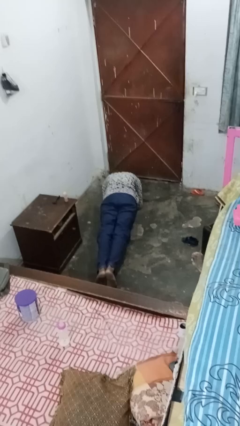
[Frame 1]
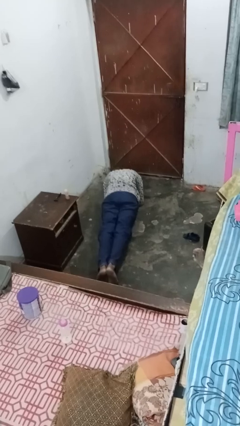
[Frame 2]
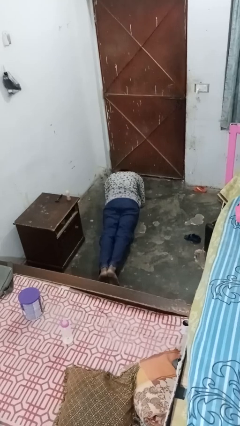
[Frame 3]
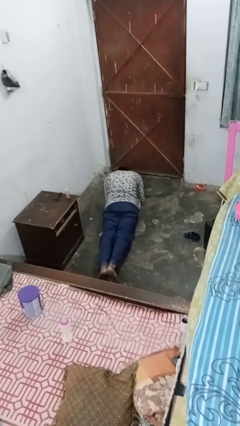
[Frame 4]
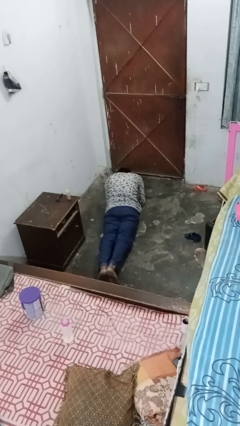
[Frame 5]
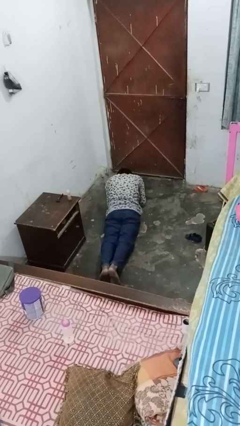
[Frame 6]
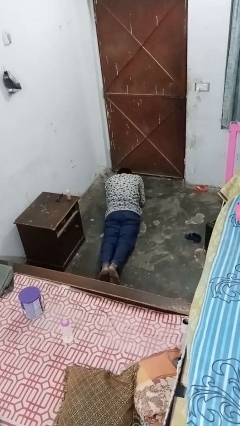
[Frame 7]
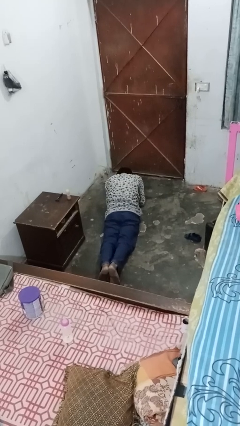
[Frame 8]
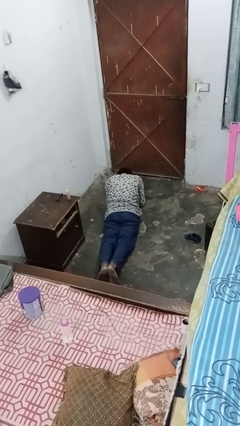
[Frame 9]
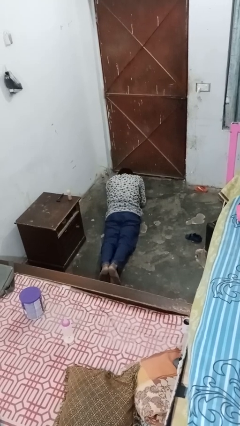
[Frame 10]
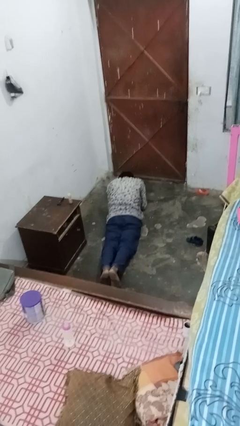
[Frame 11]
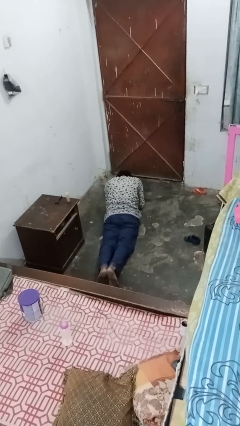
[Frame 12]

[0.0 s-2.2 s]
person stands up from floor

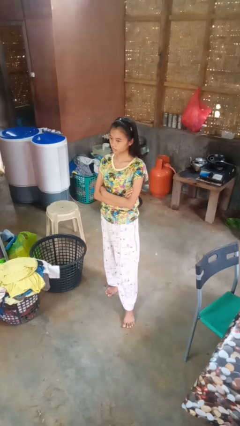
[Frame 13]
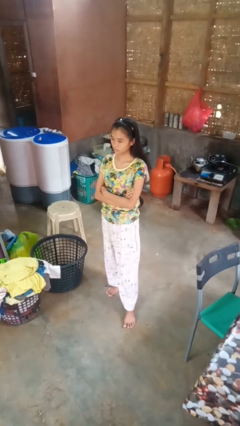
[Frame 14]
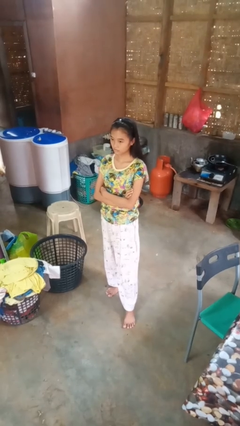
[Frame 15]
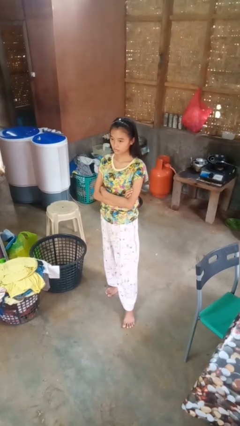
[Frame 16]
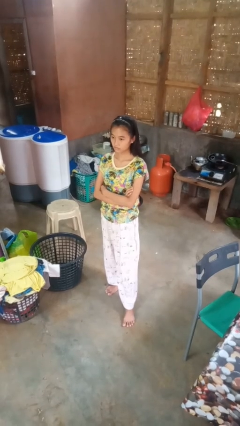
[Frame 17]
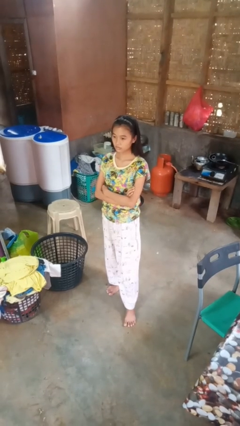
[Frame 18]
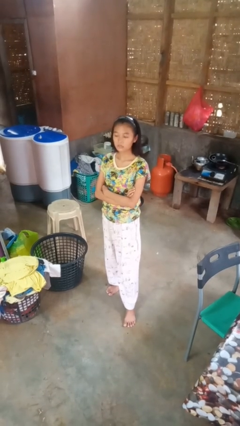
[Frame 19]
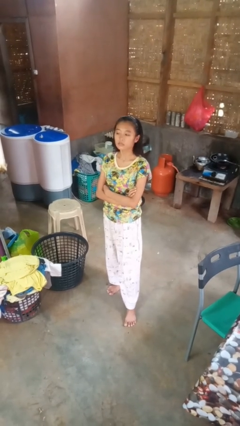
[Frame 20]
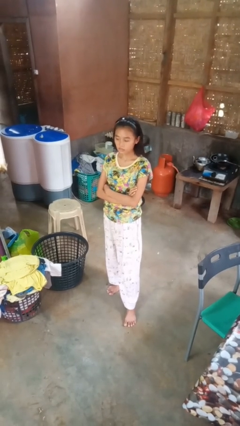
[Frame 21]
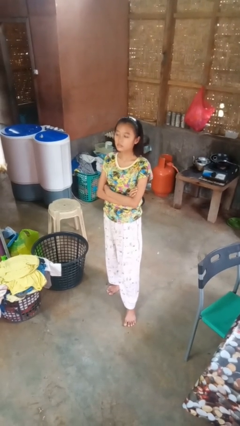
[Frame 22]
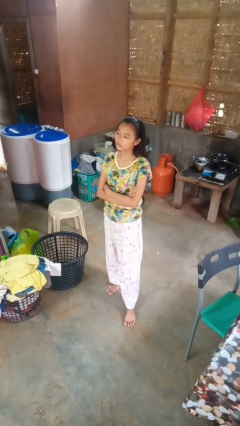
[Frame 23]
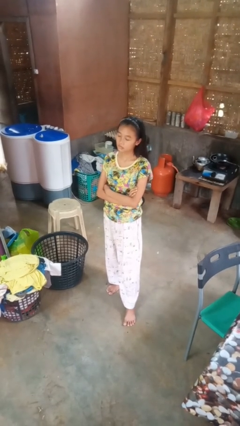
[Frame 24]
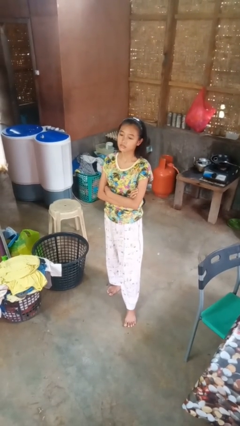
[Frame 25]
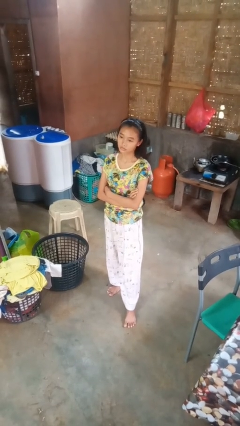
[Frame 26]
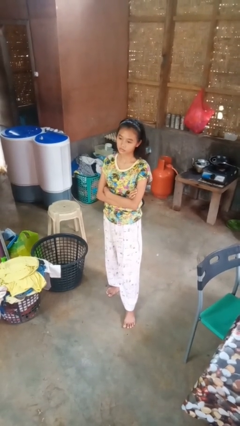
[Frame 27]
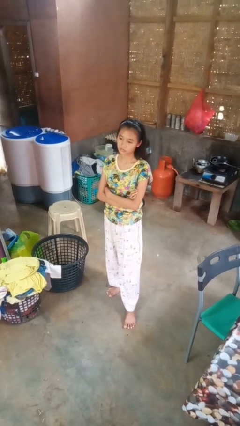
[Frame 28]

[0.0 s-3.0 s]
person nods head

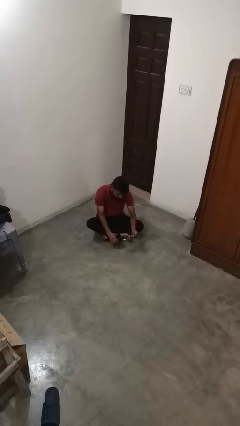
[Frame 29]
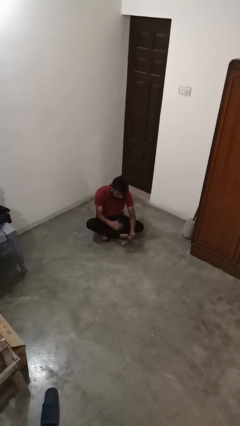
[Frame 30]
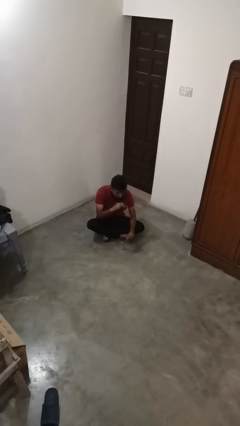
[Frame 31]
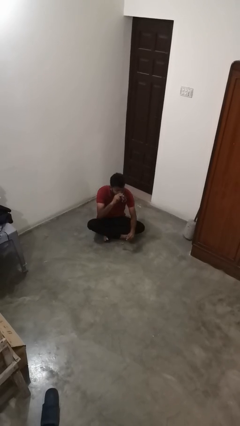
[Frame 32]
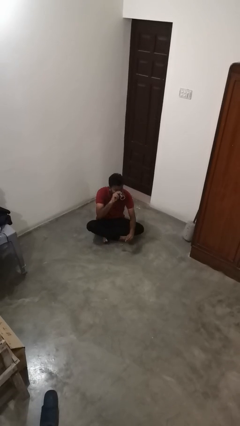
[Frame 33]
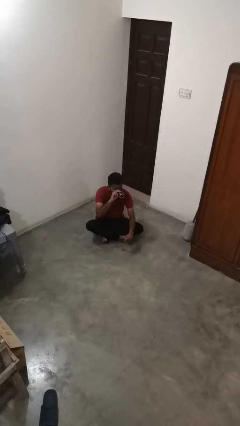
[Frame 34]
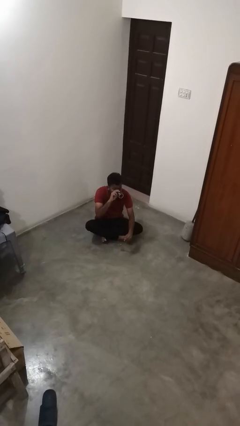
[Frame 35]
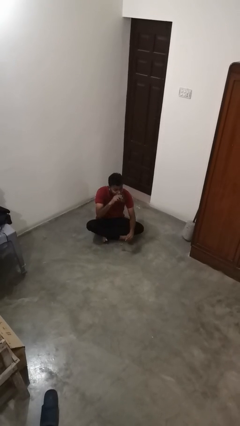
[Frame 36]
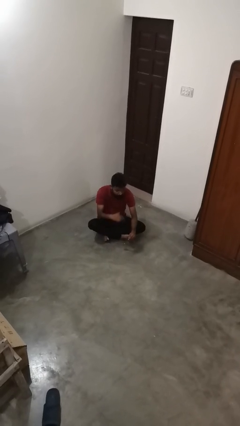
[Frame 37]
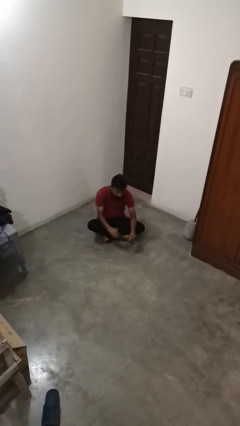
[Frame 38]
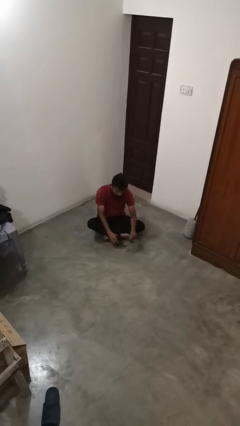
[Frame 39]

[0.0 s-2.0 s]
person drinks from mug

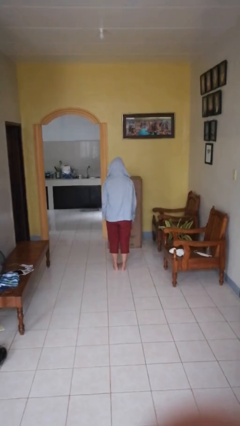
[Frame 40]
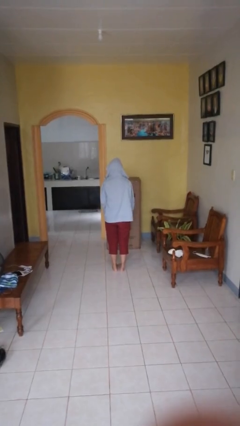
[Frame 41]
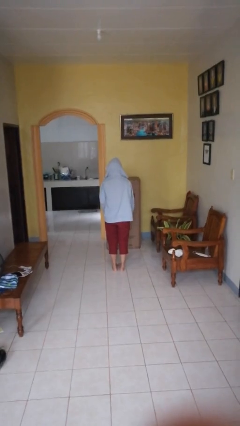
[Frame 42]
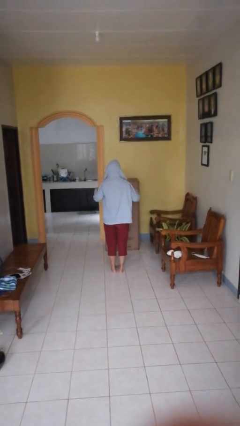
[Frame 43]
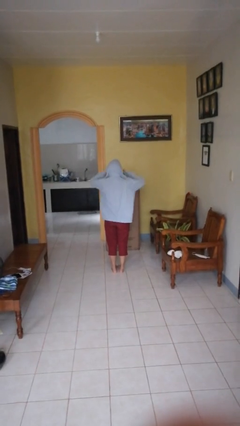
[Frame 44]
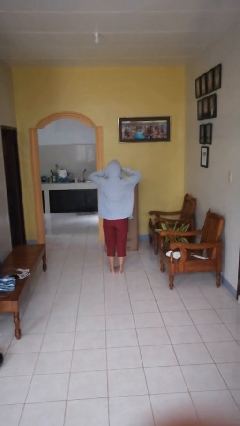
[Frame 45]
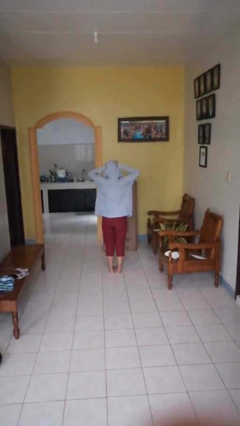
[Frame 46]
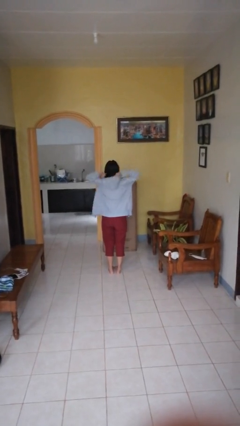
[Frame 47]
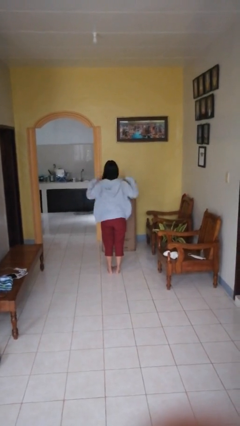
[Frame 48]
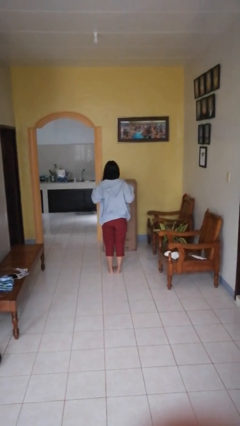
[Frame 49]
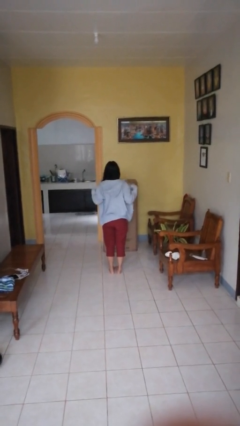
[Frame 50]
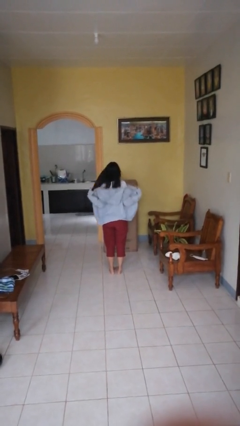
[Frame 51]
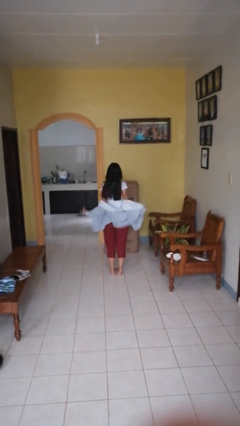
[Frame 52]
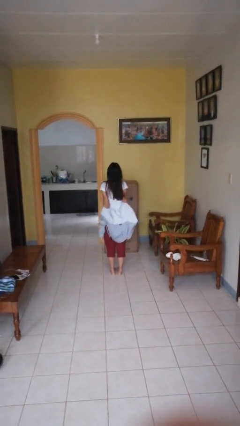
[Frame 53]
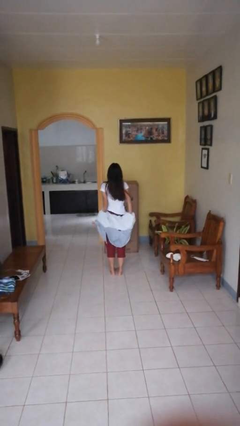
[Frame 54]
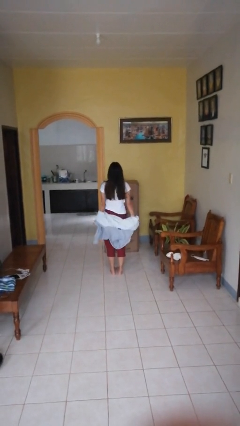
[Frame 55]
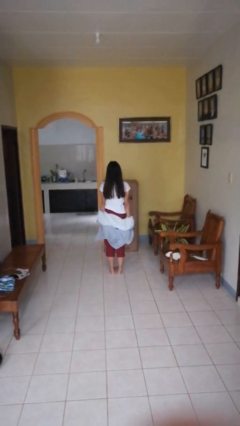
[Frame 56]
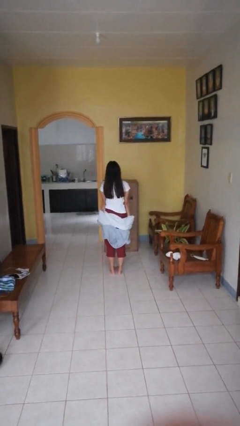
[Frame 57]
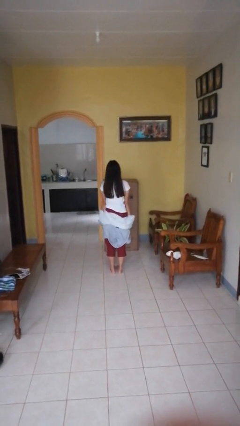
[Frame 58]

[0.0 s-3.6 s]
person takes off hoodie

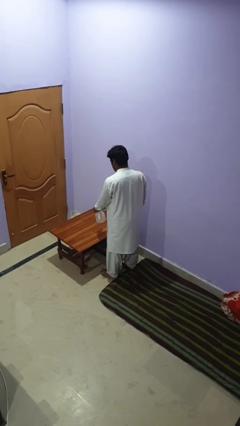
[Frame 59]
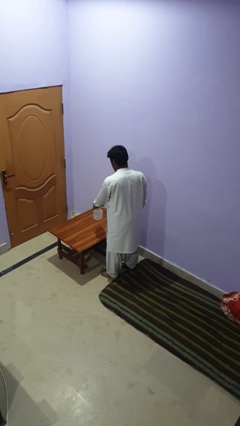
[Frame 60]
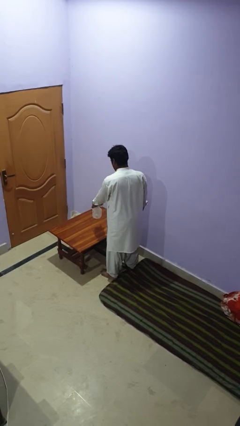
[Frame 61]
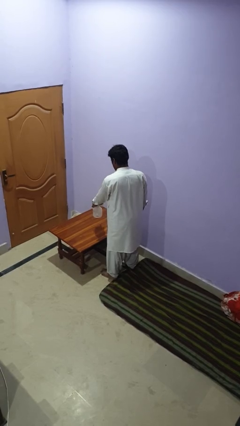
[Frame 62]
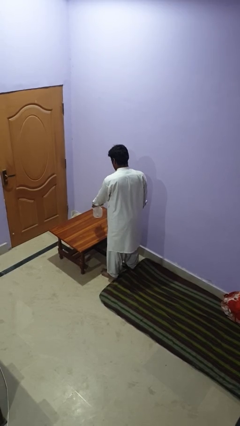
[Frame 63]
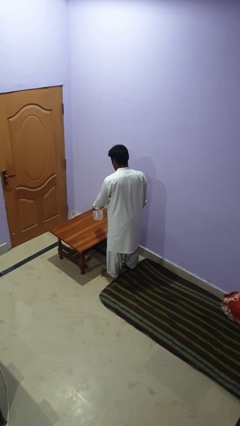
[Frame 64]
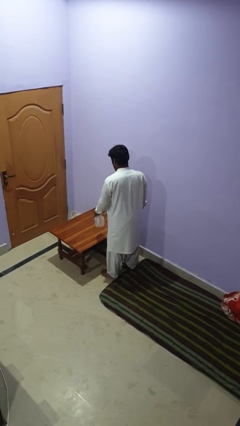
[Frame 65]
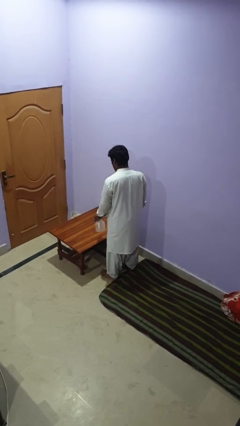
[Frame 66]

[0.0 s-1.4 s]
person sprays from bottle

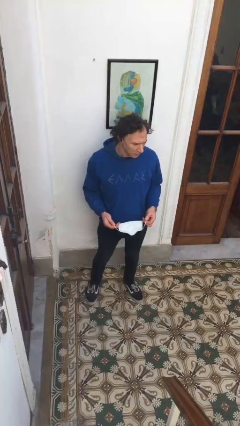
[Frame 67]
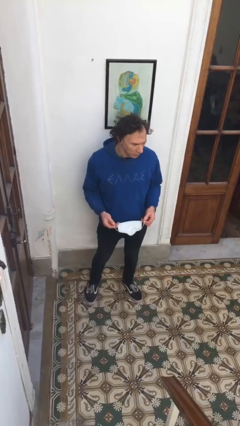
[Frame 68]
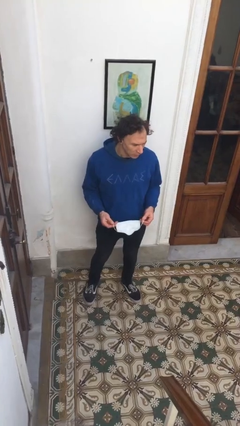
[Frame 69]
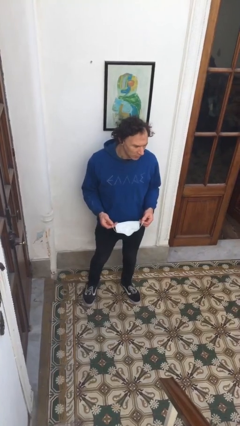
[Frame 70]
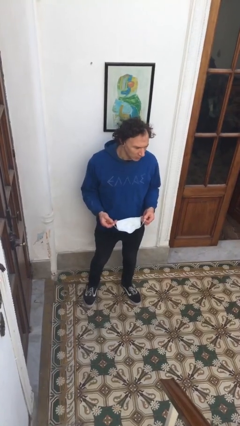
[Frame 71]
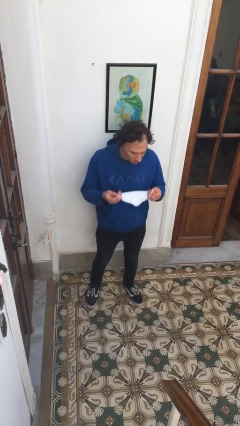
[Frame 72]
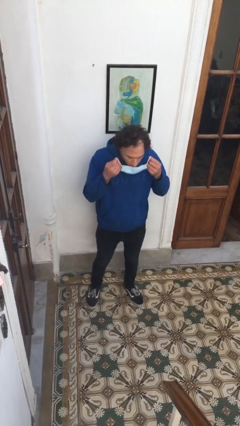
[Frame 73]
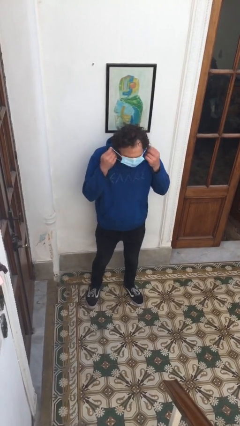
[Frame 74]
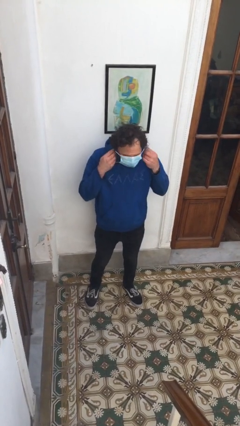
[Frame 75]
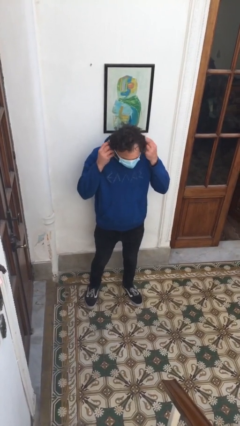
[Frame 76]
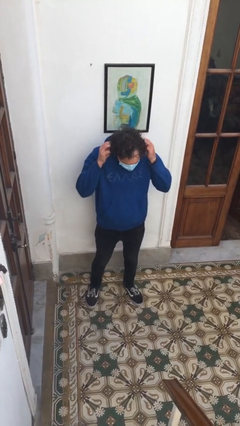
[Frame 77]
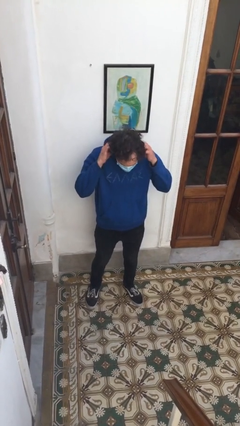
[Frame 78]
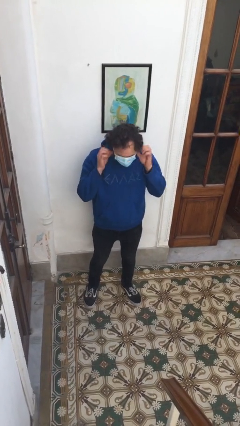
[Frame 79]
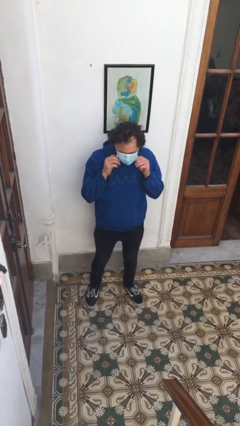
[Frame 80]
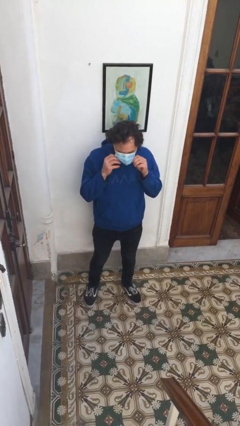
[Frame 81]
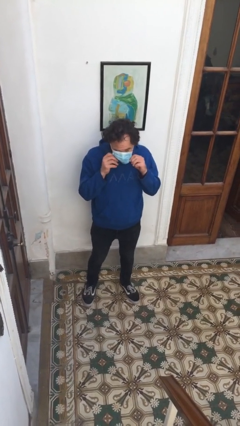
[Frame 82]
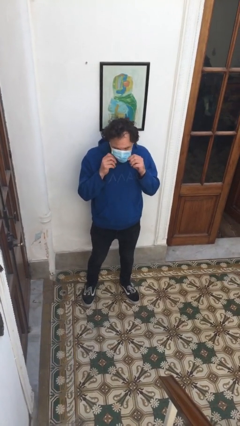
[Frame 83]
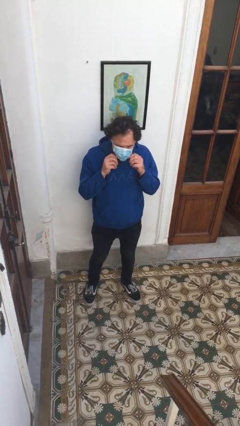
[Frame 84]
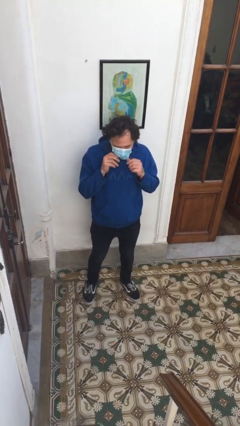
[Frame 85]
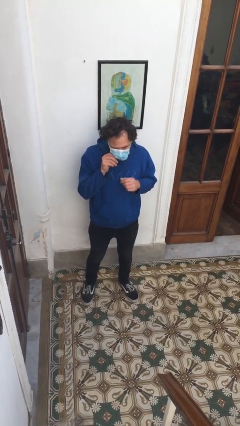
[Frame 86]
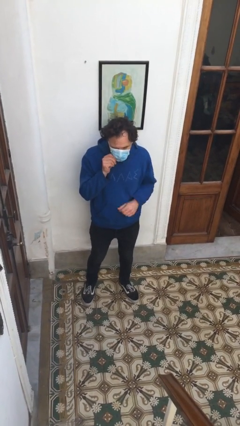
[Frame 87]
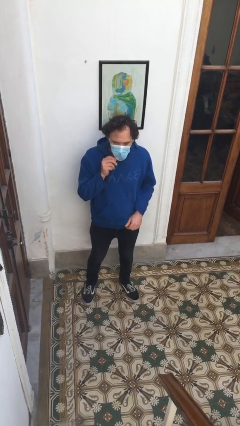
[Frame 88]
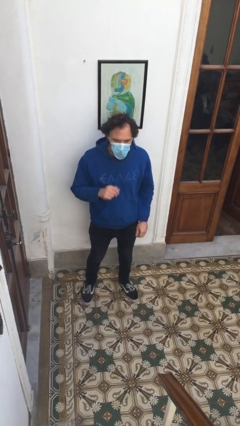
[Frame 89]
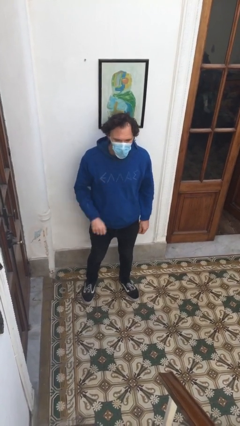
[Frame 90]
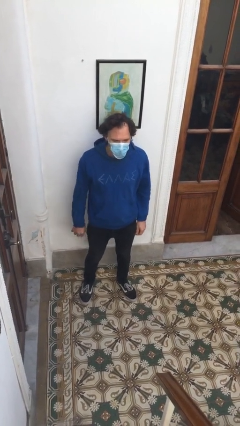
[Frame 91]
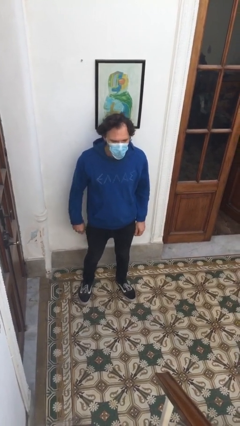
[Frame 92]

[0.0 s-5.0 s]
person puts on facemask

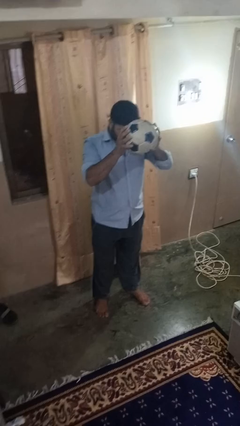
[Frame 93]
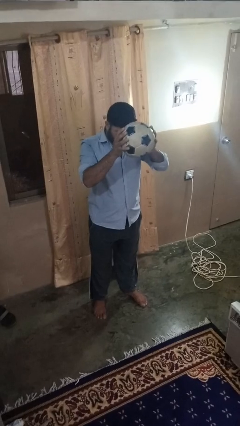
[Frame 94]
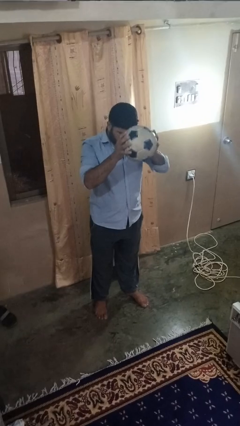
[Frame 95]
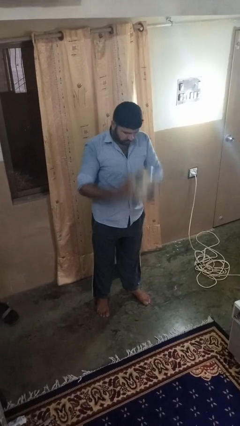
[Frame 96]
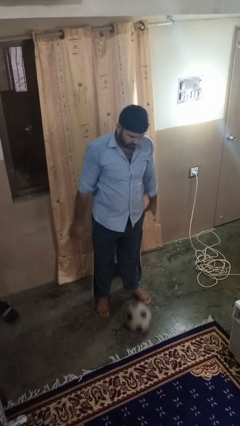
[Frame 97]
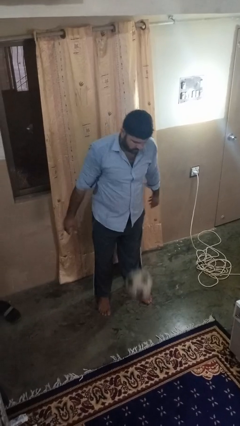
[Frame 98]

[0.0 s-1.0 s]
person bounces ball on floor
